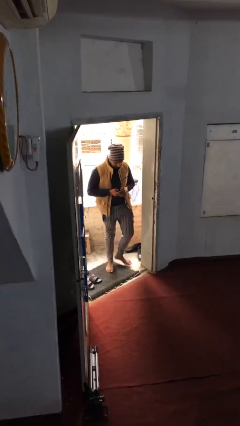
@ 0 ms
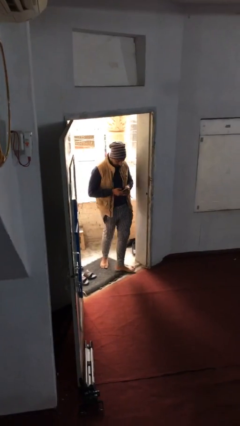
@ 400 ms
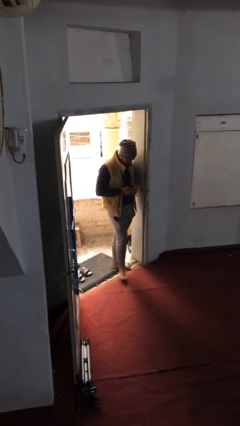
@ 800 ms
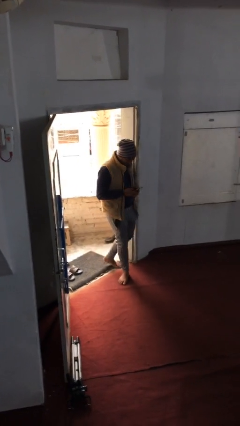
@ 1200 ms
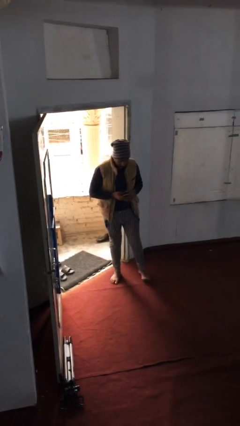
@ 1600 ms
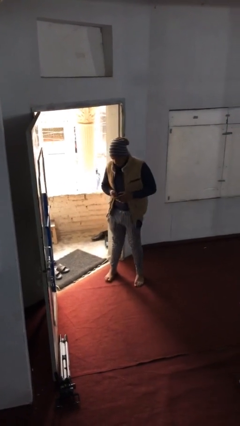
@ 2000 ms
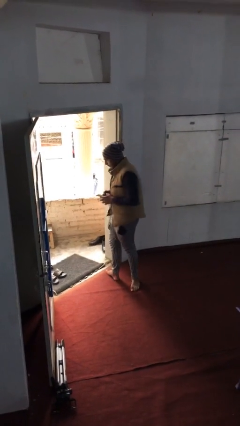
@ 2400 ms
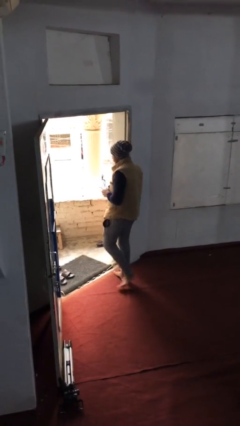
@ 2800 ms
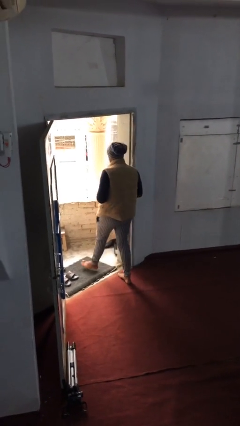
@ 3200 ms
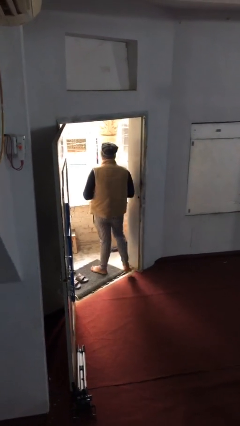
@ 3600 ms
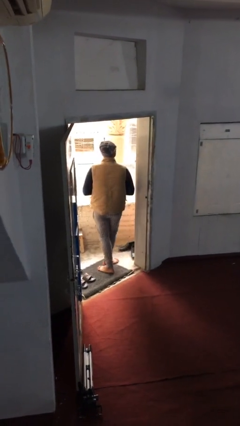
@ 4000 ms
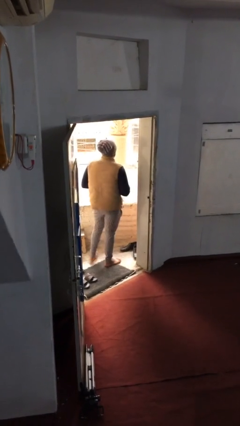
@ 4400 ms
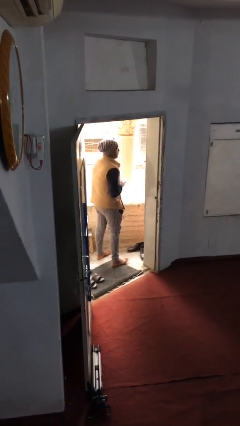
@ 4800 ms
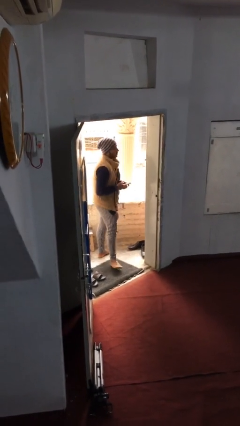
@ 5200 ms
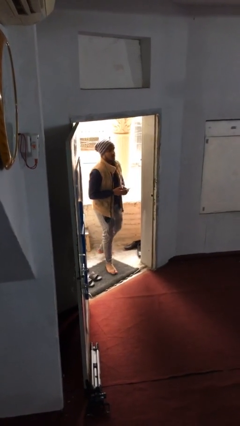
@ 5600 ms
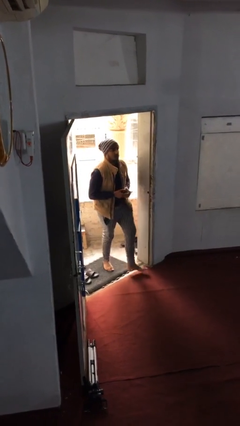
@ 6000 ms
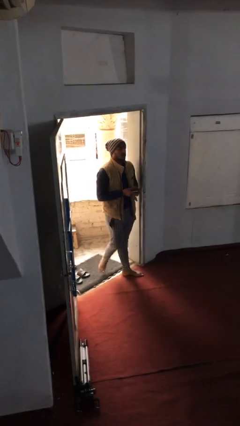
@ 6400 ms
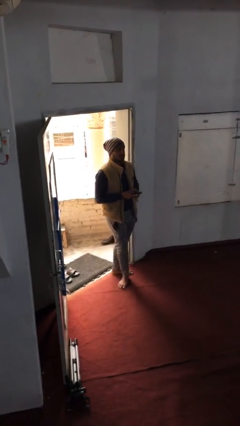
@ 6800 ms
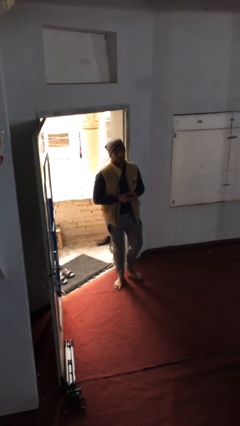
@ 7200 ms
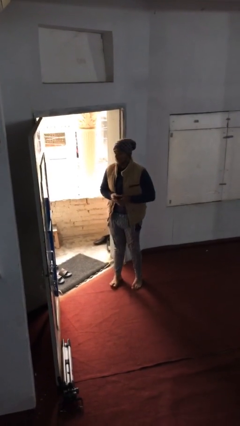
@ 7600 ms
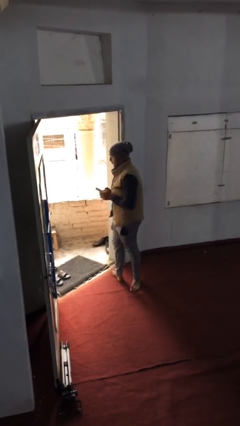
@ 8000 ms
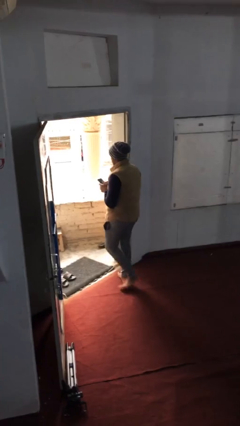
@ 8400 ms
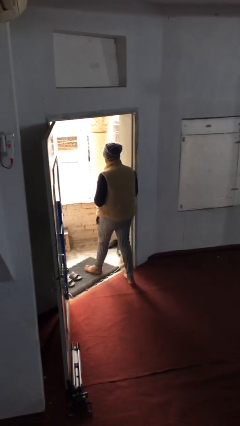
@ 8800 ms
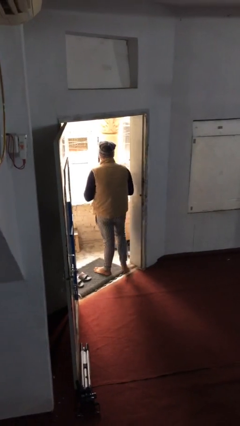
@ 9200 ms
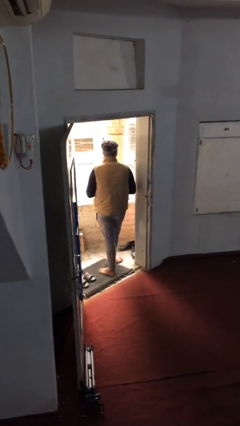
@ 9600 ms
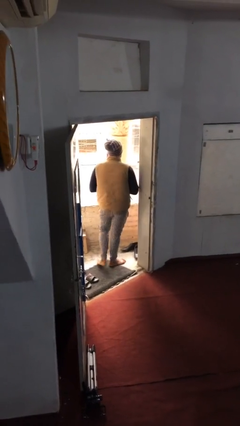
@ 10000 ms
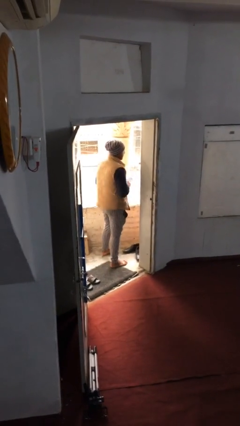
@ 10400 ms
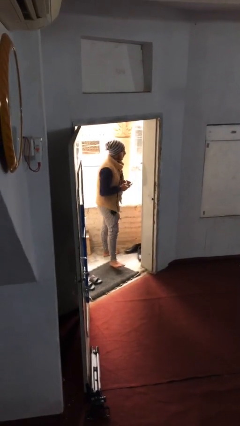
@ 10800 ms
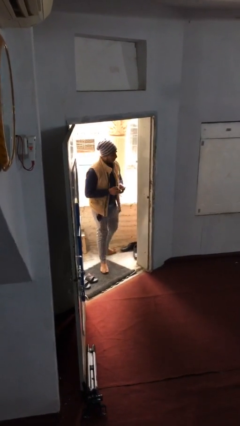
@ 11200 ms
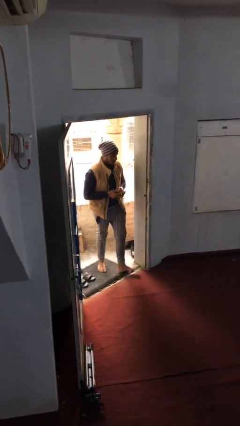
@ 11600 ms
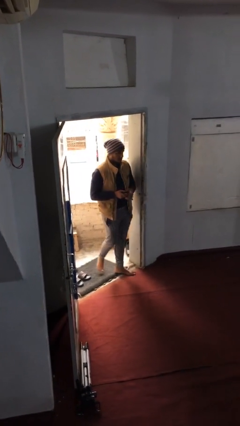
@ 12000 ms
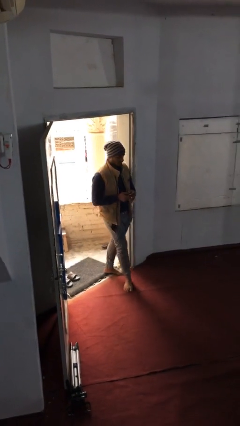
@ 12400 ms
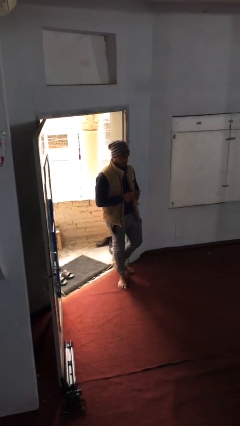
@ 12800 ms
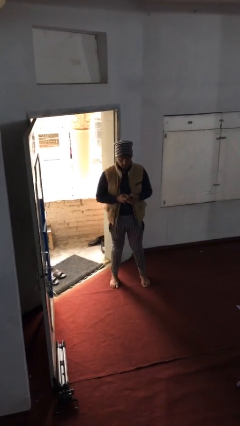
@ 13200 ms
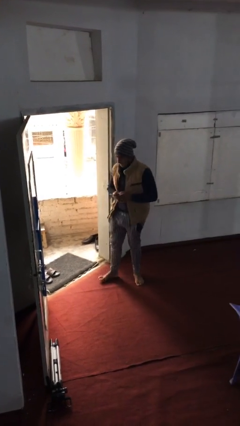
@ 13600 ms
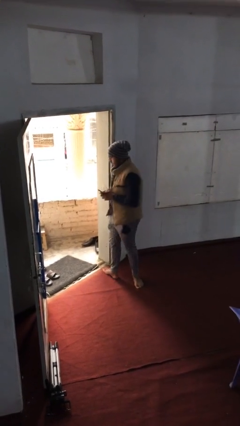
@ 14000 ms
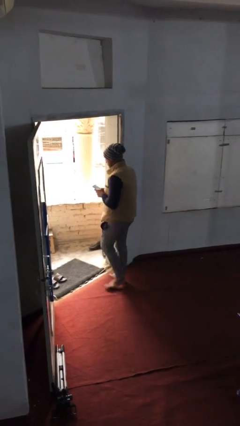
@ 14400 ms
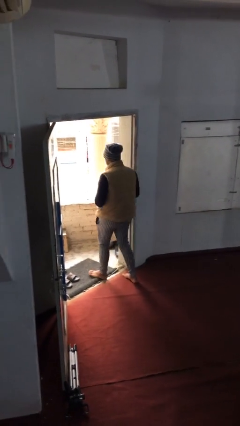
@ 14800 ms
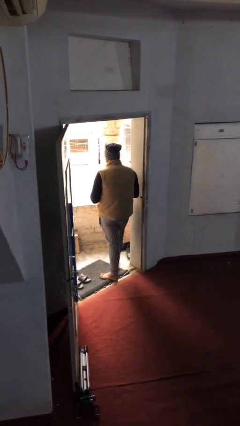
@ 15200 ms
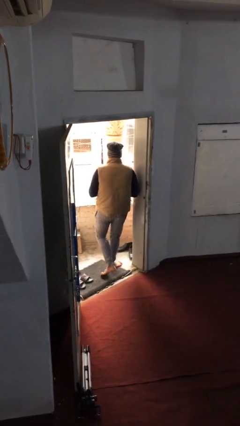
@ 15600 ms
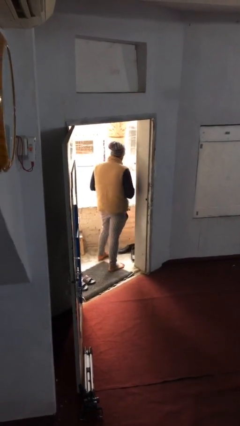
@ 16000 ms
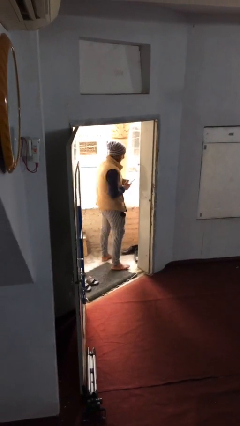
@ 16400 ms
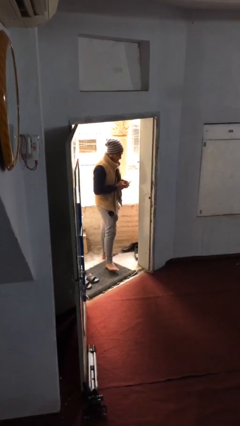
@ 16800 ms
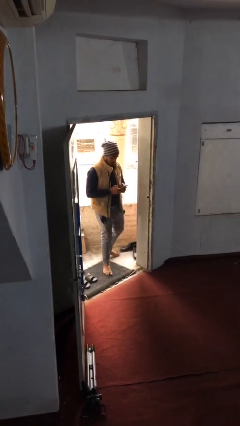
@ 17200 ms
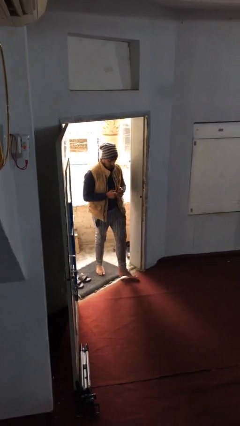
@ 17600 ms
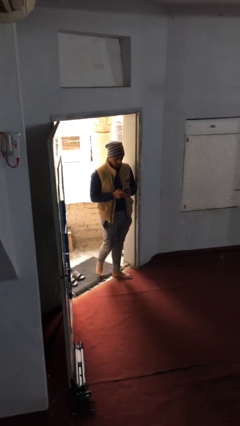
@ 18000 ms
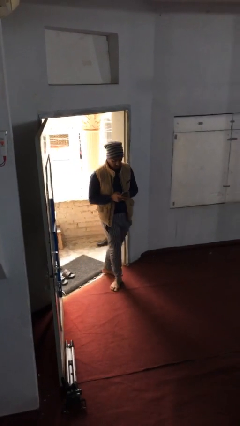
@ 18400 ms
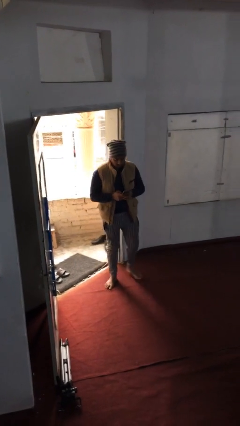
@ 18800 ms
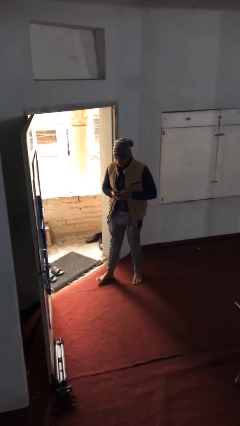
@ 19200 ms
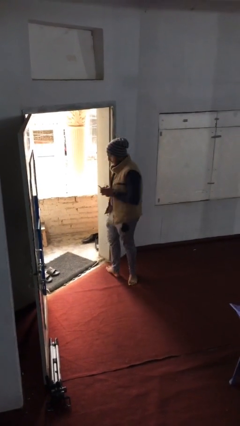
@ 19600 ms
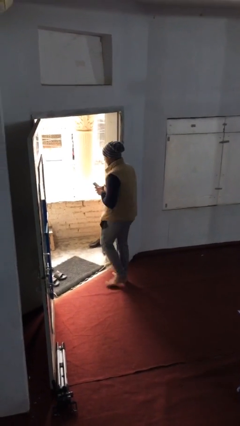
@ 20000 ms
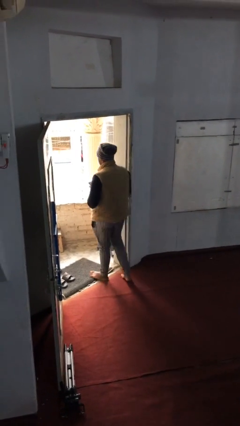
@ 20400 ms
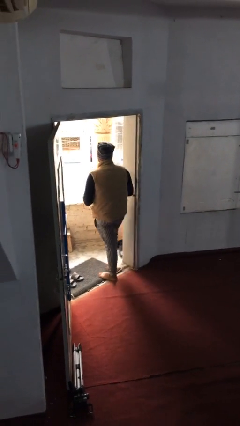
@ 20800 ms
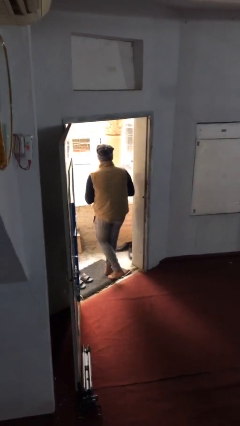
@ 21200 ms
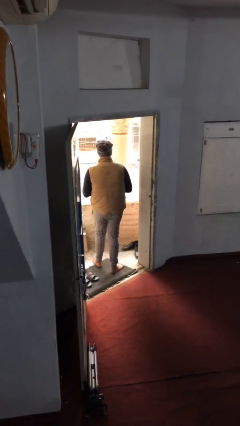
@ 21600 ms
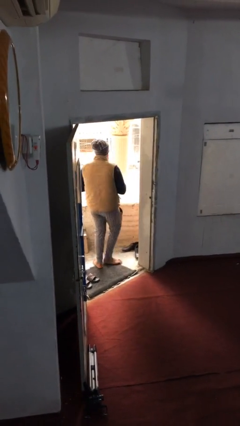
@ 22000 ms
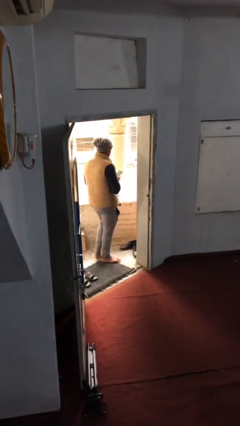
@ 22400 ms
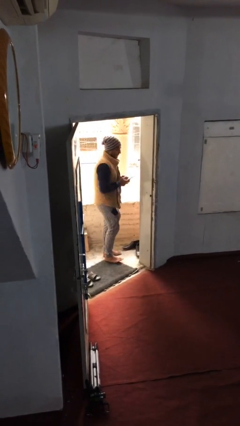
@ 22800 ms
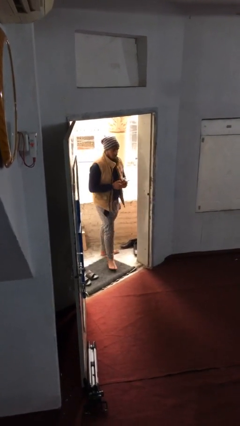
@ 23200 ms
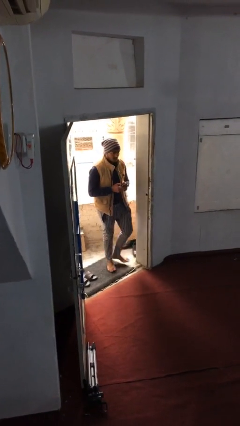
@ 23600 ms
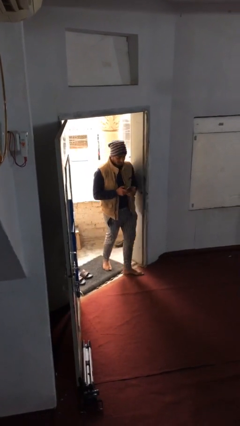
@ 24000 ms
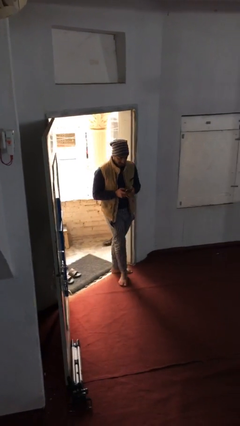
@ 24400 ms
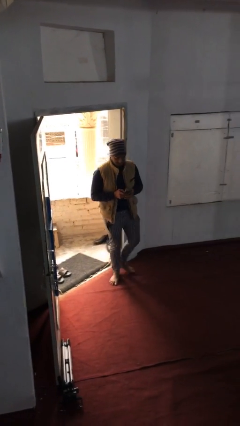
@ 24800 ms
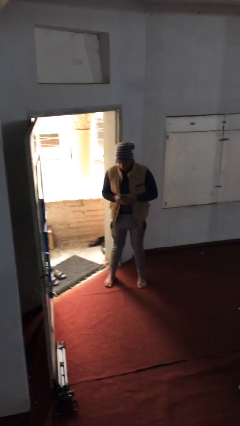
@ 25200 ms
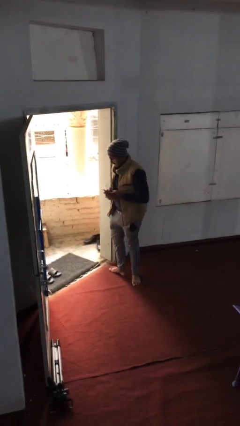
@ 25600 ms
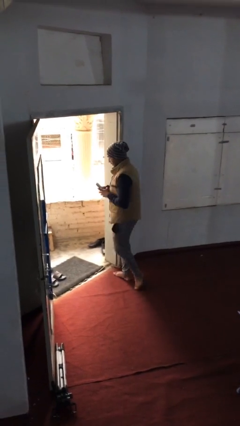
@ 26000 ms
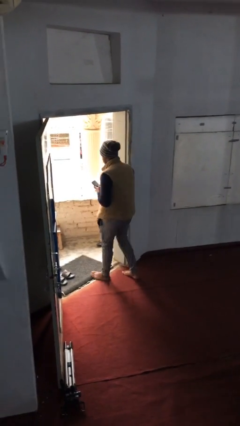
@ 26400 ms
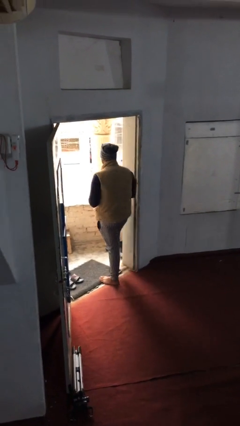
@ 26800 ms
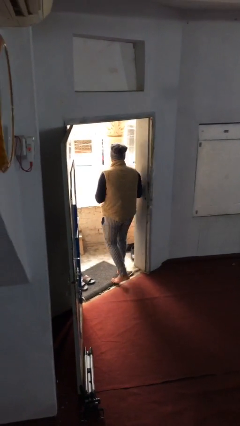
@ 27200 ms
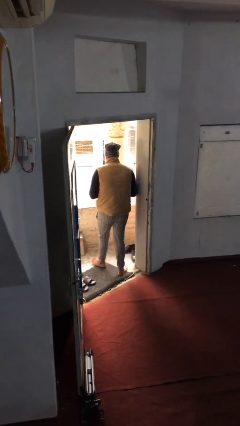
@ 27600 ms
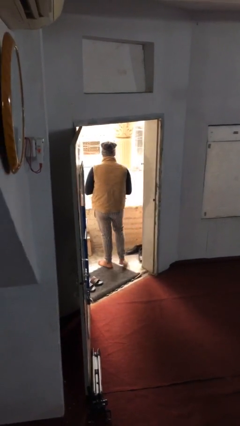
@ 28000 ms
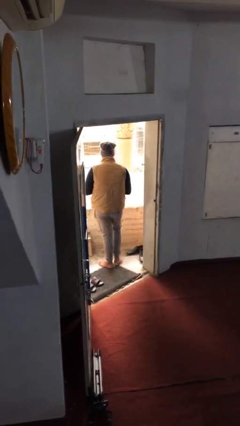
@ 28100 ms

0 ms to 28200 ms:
person texts on phone

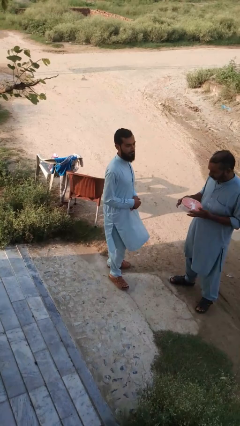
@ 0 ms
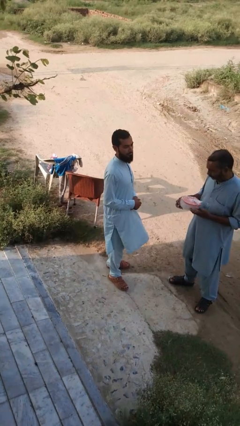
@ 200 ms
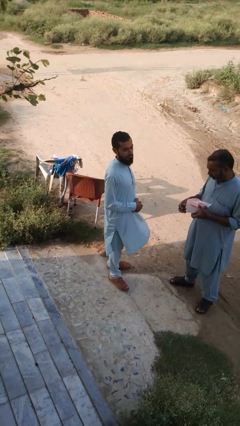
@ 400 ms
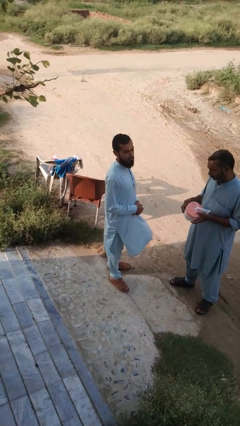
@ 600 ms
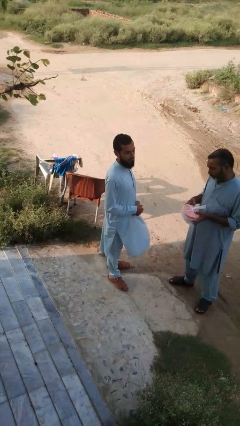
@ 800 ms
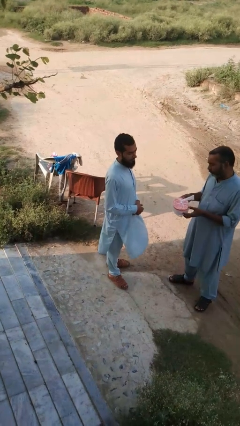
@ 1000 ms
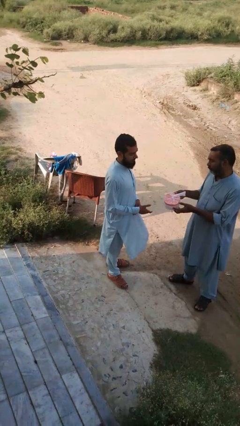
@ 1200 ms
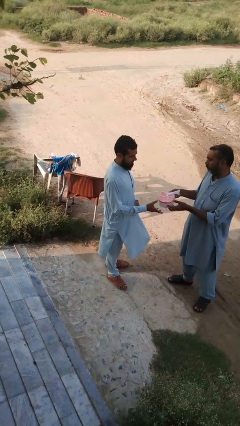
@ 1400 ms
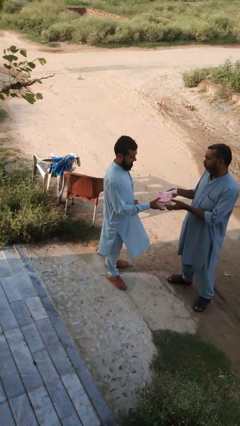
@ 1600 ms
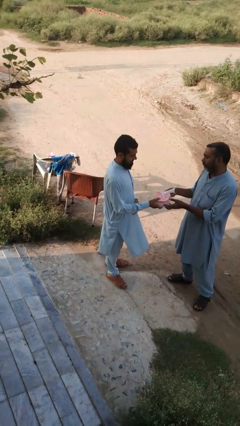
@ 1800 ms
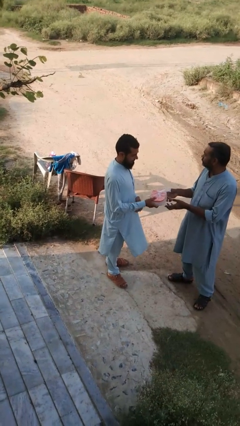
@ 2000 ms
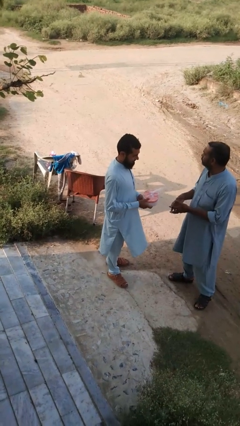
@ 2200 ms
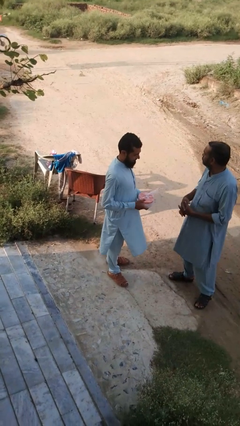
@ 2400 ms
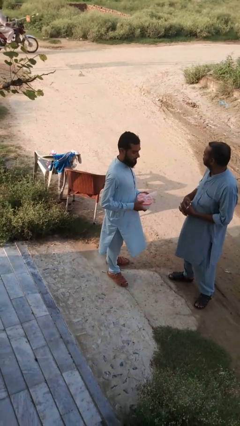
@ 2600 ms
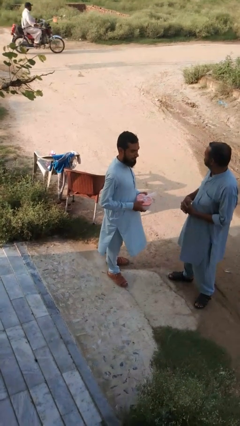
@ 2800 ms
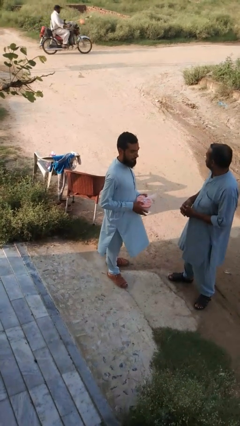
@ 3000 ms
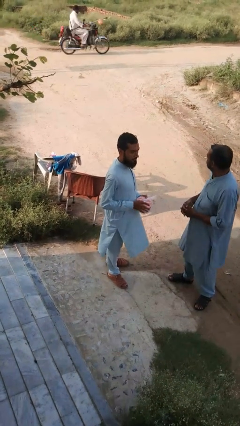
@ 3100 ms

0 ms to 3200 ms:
person transfers object to person

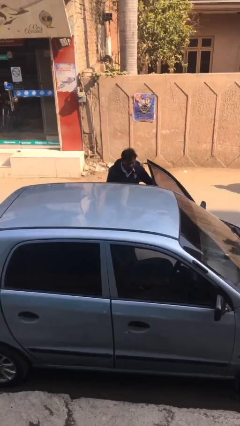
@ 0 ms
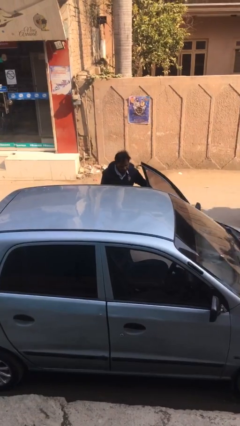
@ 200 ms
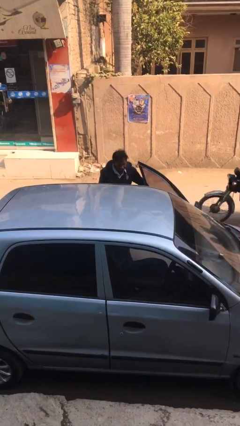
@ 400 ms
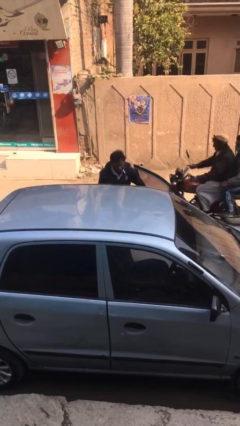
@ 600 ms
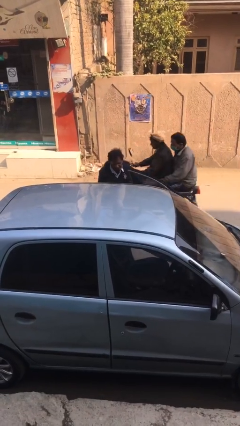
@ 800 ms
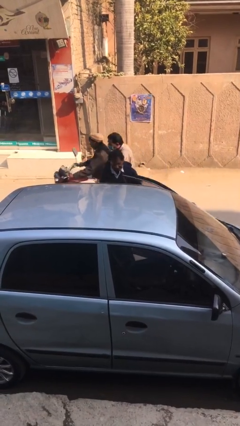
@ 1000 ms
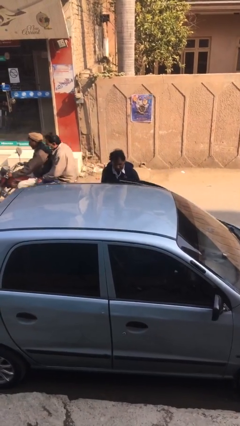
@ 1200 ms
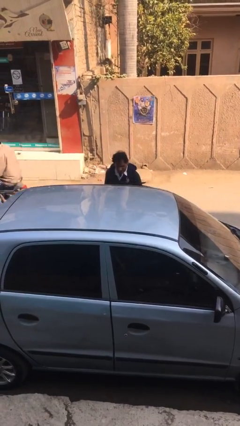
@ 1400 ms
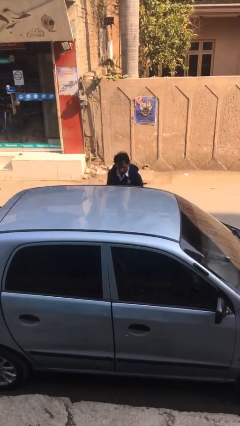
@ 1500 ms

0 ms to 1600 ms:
person closes car door
